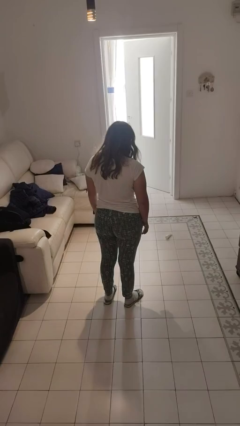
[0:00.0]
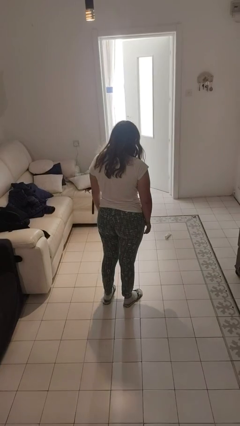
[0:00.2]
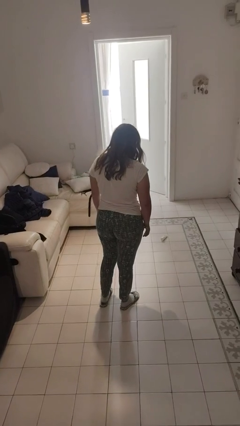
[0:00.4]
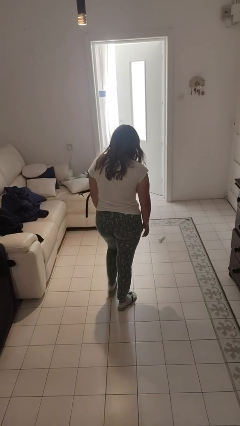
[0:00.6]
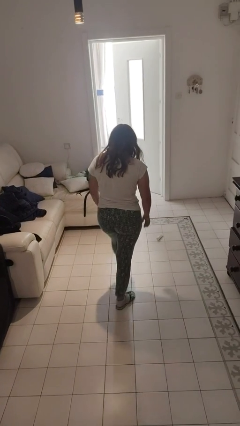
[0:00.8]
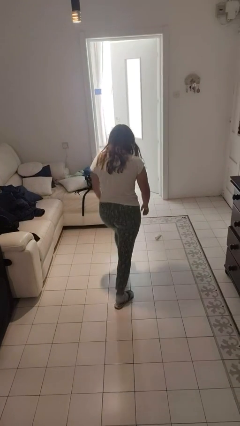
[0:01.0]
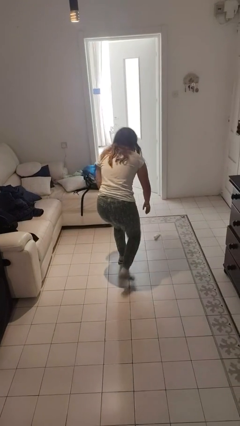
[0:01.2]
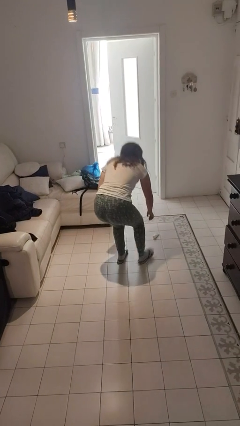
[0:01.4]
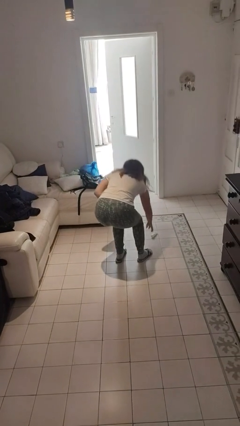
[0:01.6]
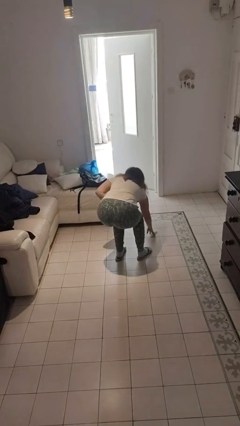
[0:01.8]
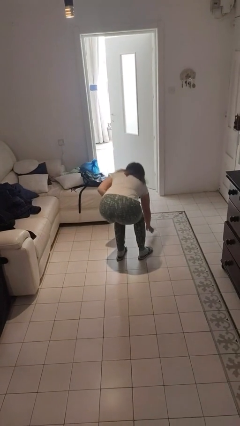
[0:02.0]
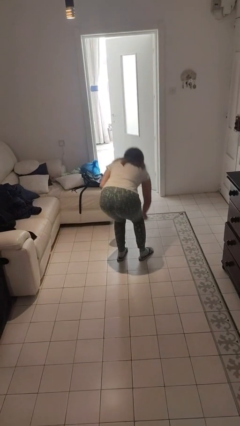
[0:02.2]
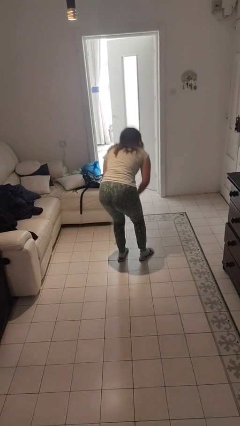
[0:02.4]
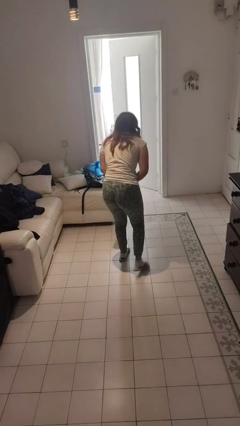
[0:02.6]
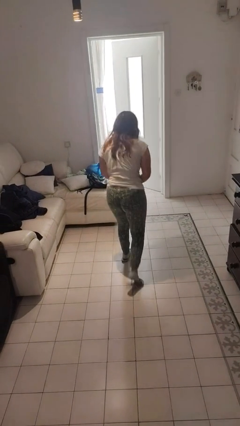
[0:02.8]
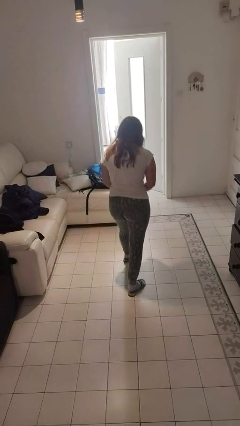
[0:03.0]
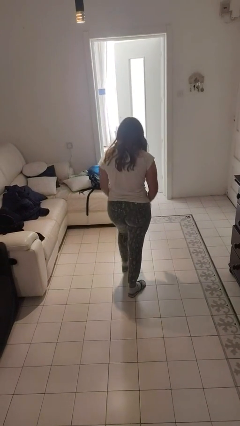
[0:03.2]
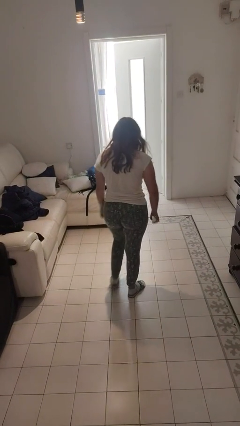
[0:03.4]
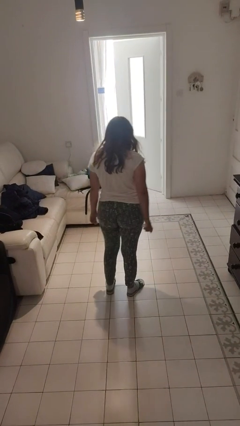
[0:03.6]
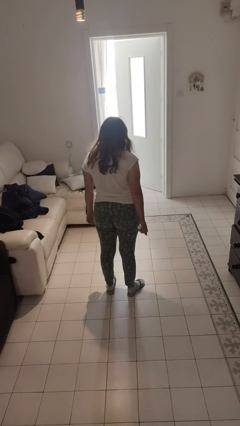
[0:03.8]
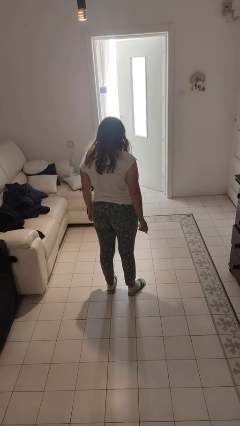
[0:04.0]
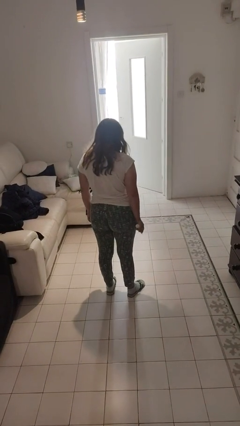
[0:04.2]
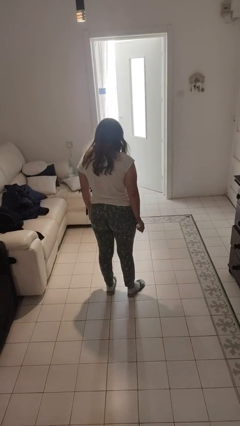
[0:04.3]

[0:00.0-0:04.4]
person picks up object from floor

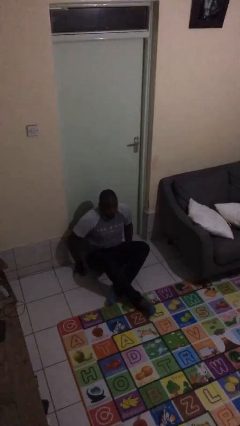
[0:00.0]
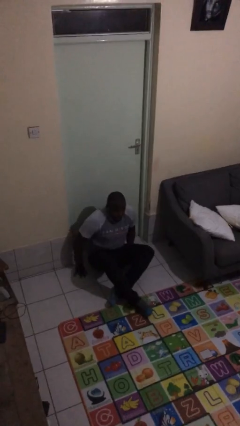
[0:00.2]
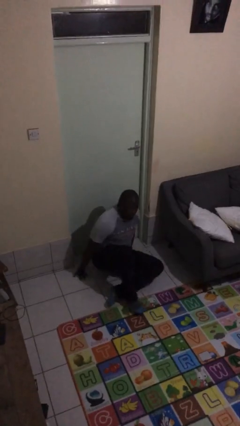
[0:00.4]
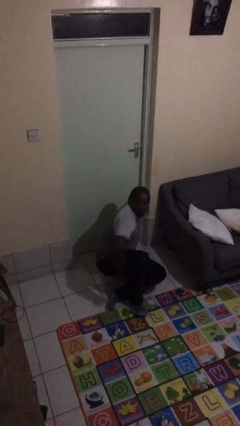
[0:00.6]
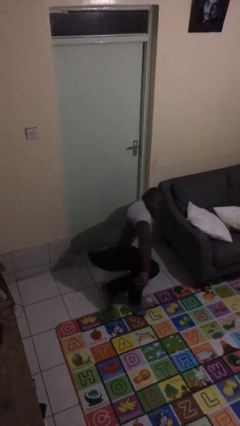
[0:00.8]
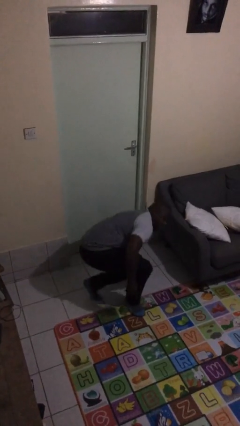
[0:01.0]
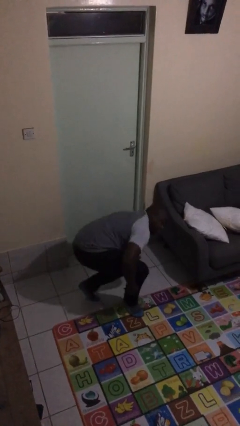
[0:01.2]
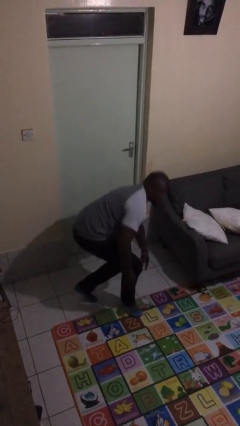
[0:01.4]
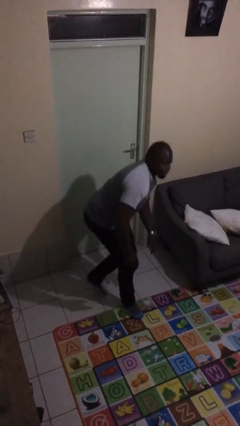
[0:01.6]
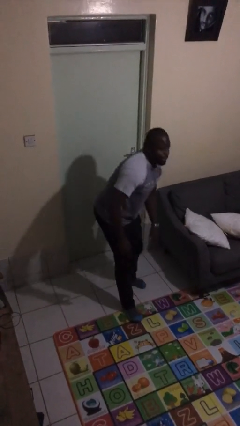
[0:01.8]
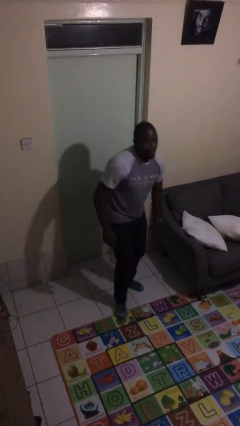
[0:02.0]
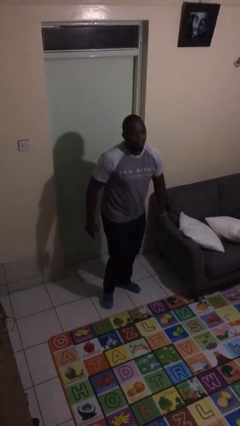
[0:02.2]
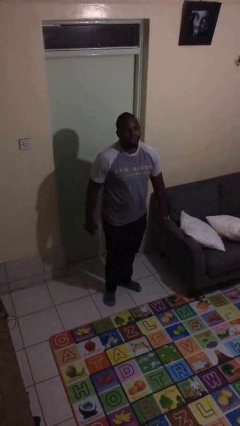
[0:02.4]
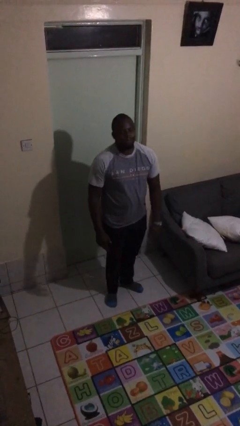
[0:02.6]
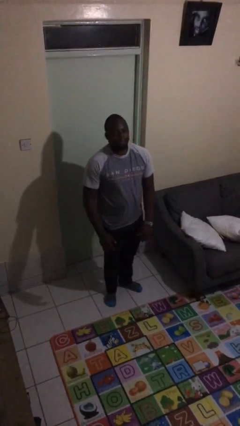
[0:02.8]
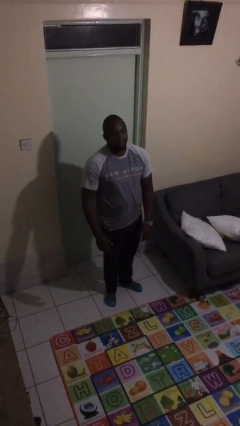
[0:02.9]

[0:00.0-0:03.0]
person stands up from floor

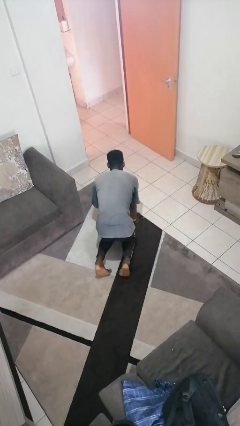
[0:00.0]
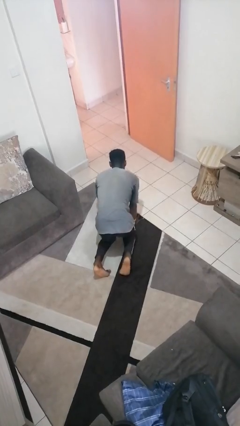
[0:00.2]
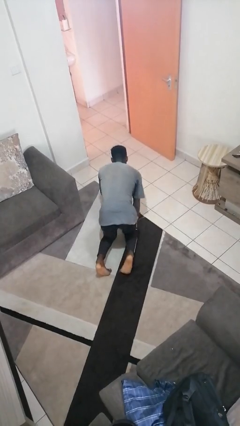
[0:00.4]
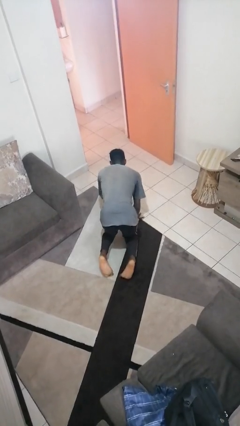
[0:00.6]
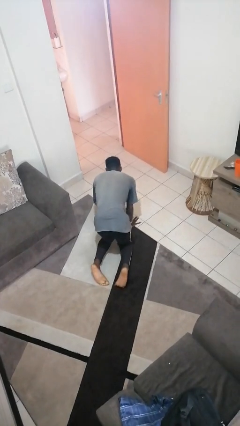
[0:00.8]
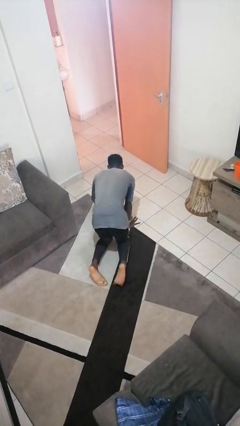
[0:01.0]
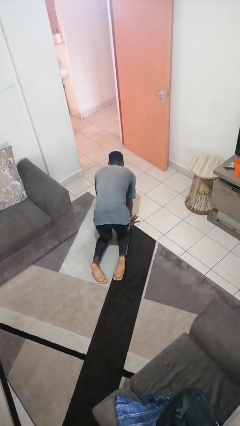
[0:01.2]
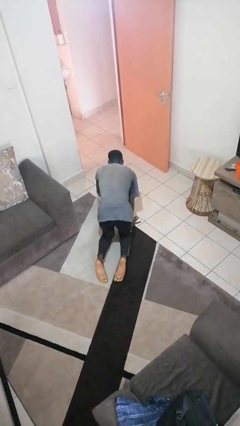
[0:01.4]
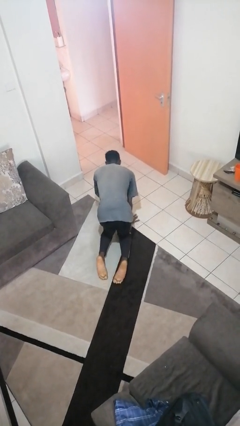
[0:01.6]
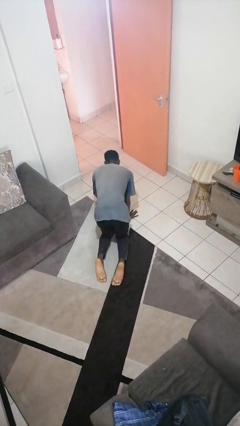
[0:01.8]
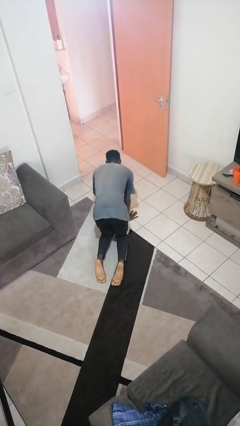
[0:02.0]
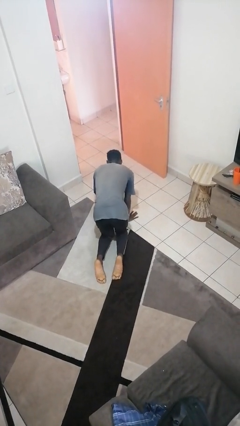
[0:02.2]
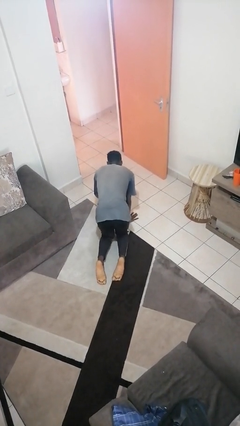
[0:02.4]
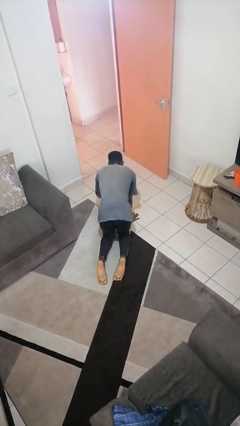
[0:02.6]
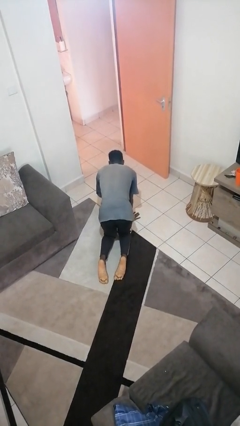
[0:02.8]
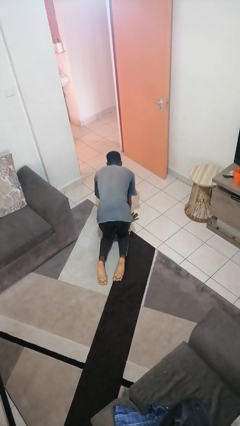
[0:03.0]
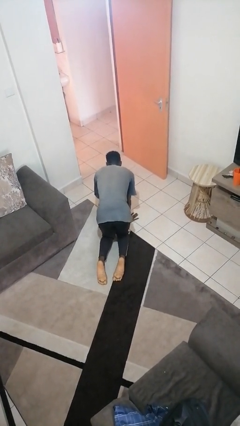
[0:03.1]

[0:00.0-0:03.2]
person crawls

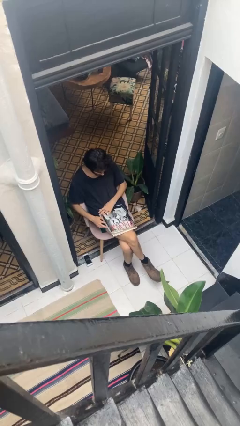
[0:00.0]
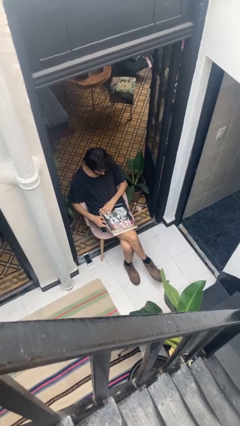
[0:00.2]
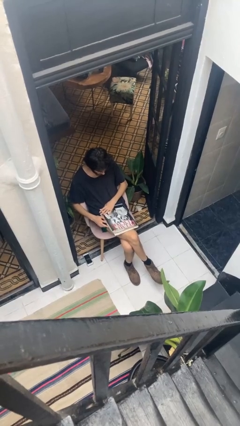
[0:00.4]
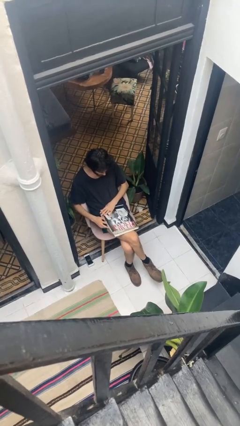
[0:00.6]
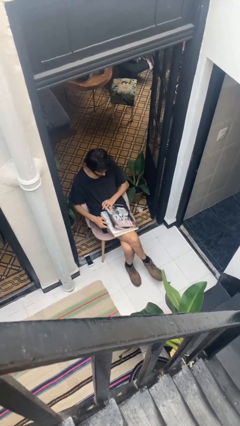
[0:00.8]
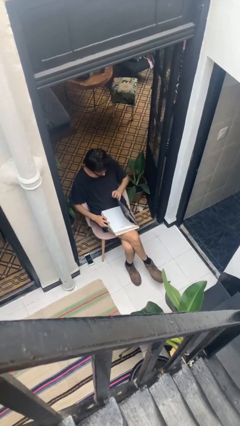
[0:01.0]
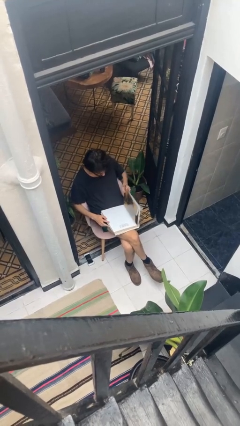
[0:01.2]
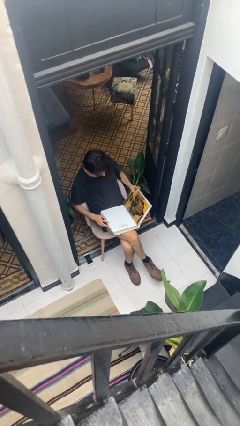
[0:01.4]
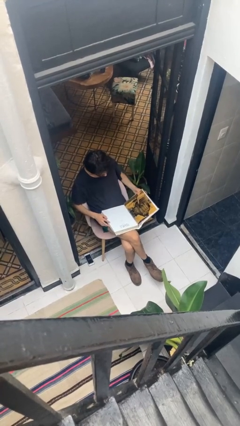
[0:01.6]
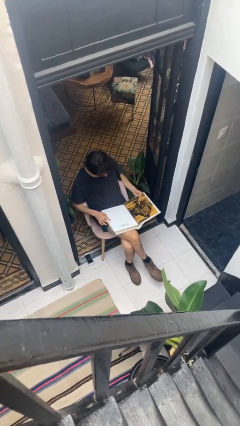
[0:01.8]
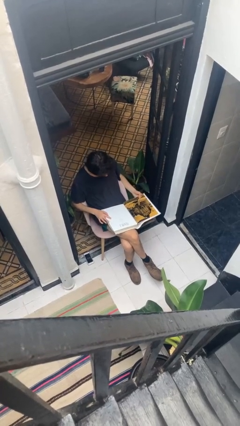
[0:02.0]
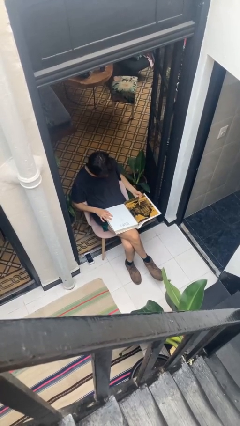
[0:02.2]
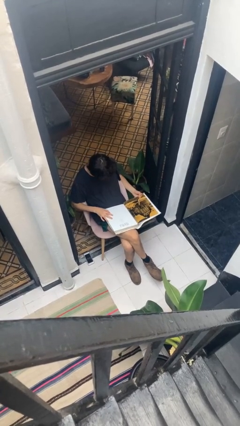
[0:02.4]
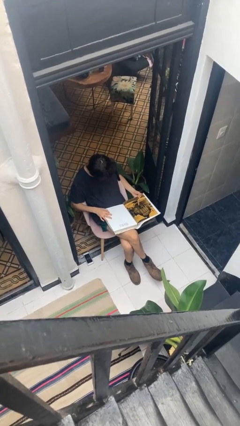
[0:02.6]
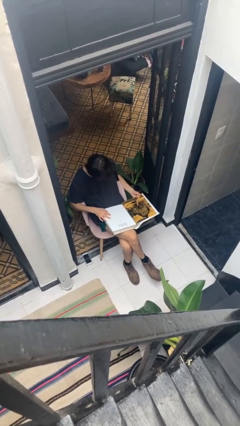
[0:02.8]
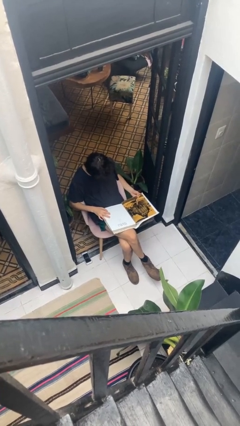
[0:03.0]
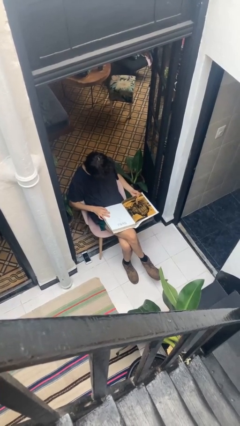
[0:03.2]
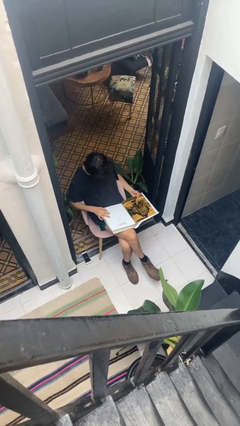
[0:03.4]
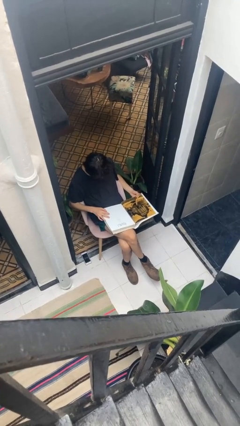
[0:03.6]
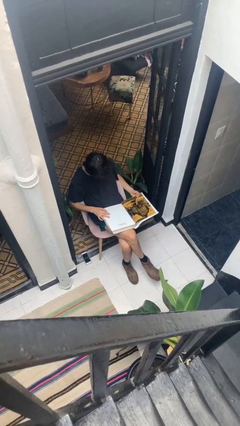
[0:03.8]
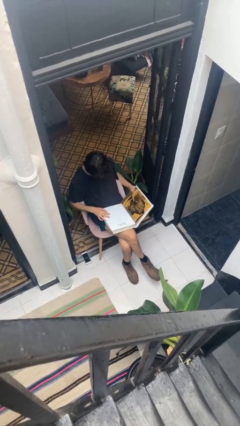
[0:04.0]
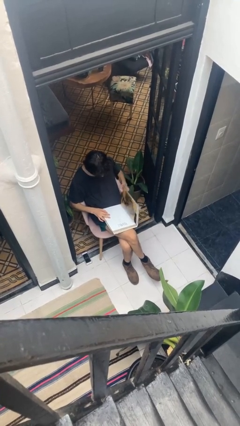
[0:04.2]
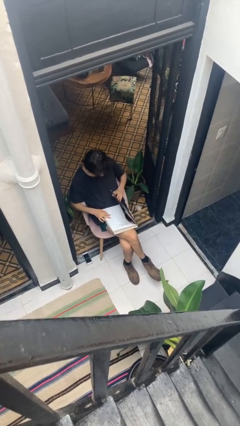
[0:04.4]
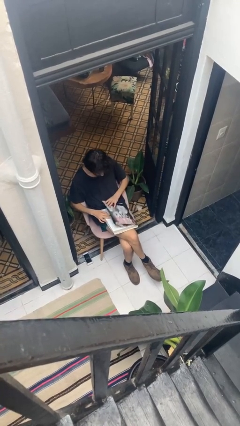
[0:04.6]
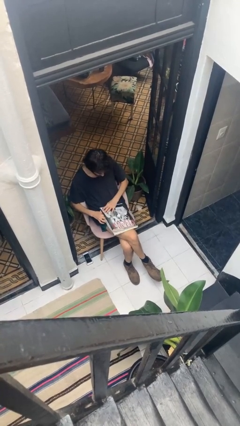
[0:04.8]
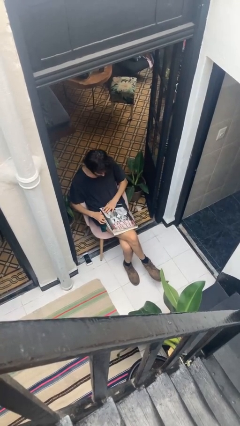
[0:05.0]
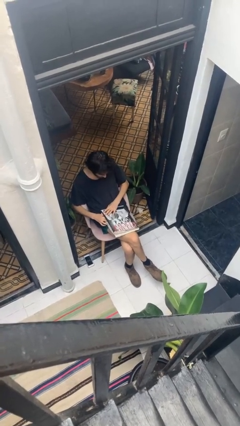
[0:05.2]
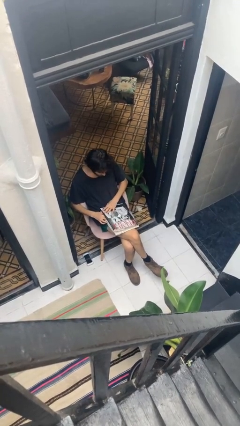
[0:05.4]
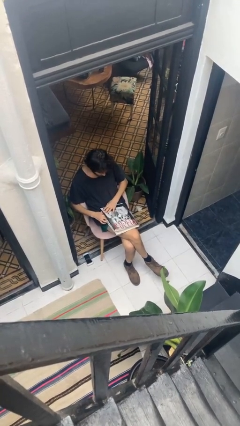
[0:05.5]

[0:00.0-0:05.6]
person reads document

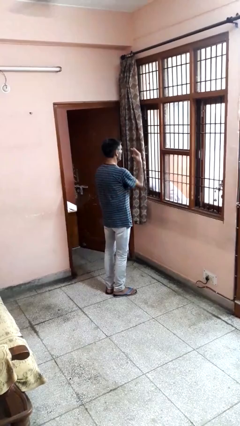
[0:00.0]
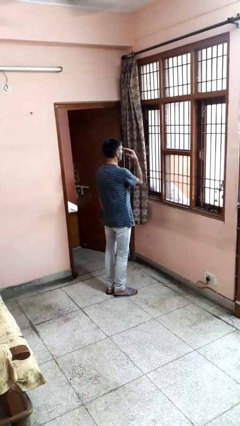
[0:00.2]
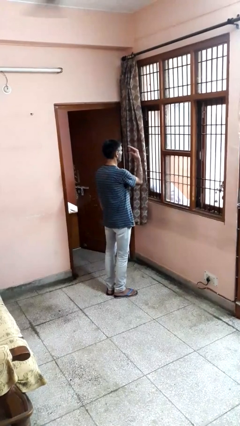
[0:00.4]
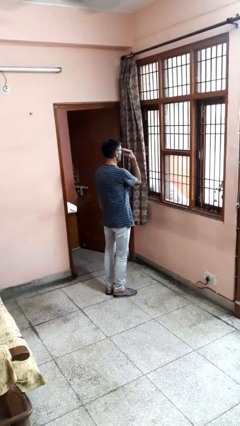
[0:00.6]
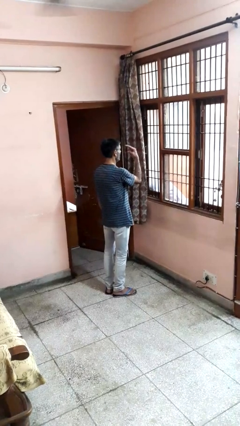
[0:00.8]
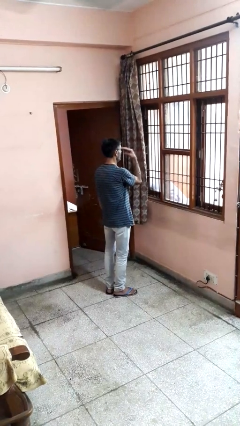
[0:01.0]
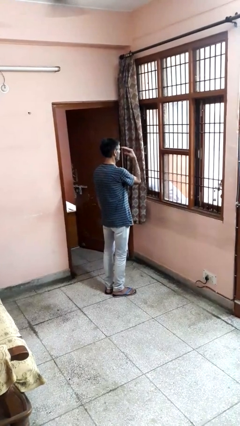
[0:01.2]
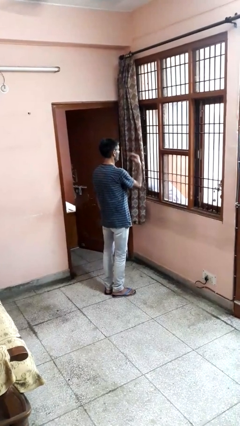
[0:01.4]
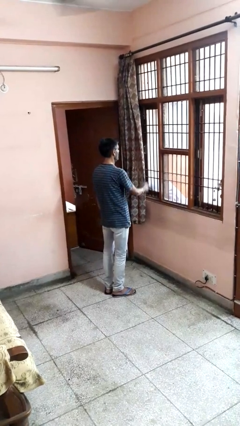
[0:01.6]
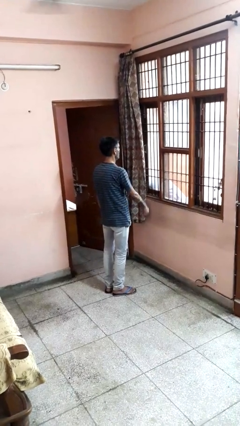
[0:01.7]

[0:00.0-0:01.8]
person gestures watch closely
